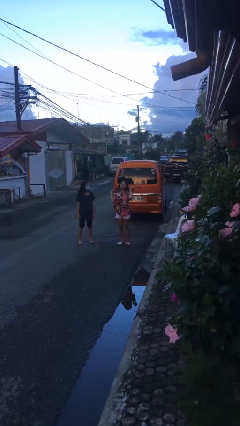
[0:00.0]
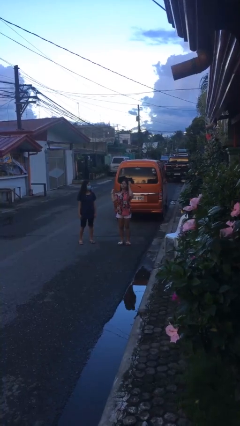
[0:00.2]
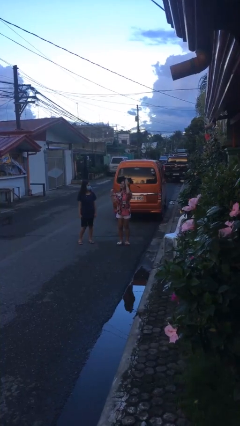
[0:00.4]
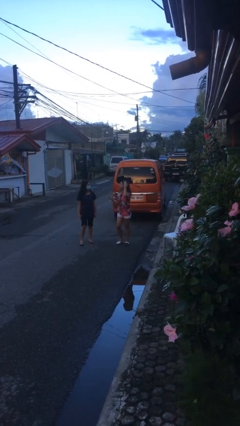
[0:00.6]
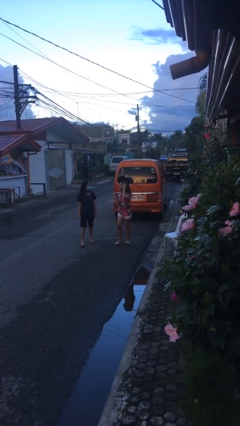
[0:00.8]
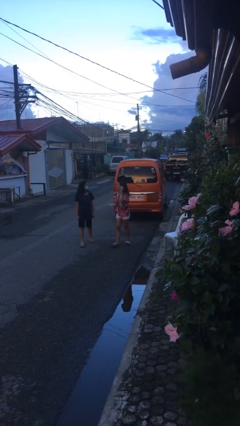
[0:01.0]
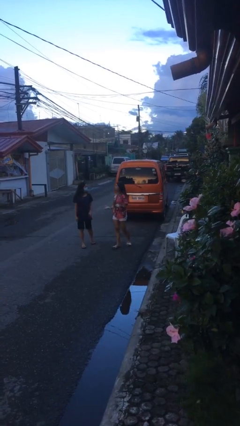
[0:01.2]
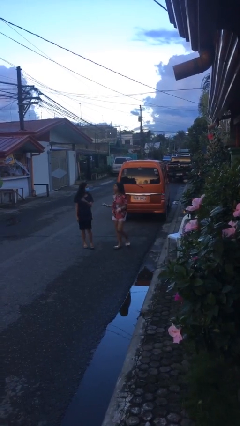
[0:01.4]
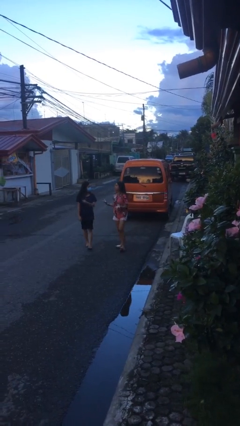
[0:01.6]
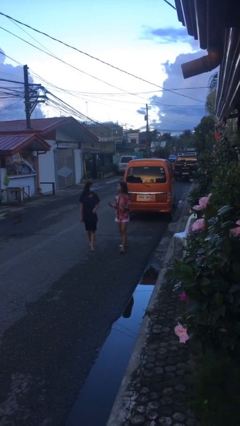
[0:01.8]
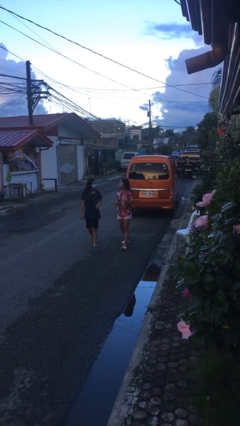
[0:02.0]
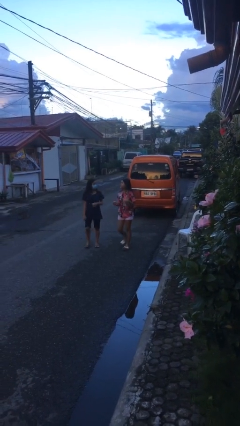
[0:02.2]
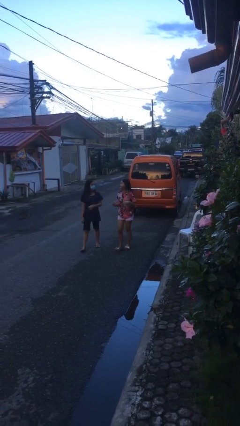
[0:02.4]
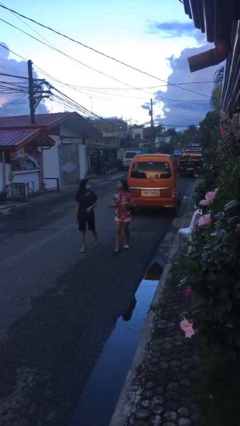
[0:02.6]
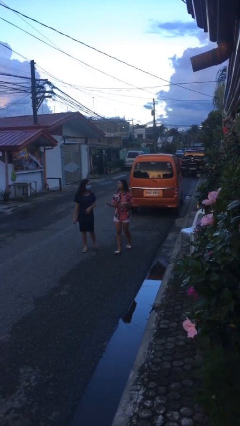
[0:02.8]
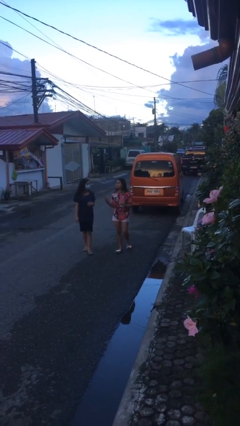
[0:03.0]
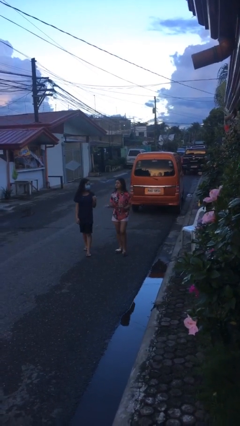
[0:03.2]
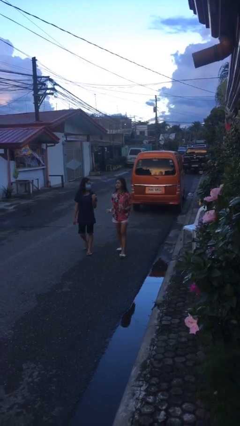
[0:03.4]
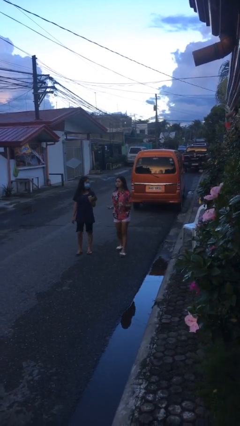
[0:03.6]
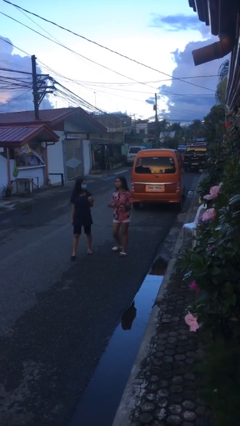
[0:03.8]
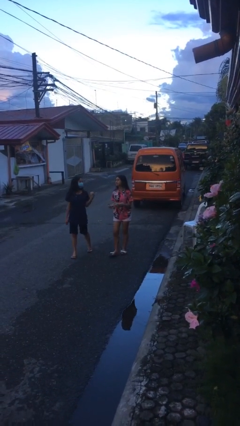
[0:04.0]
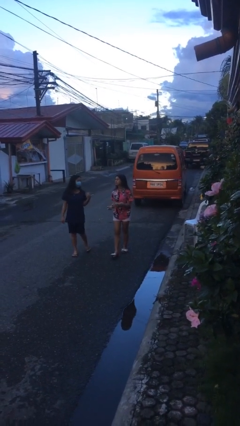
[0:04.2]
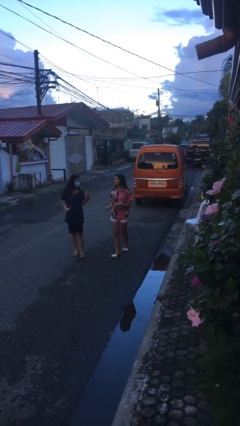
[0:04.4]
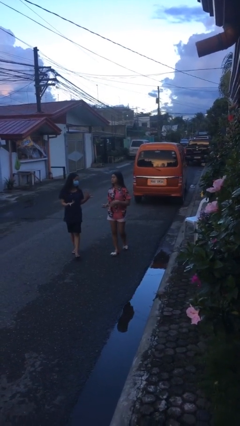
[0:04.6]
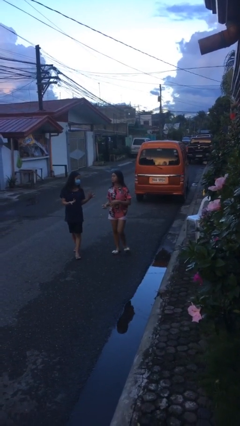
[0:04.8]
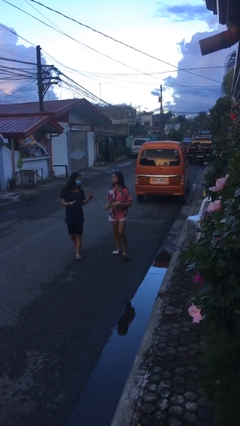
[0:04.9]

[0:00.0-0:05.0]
person talks to person

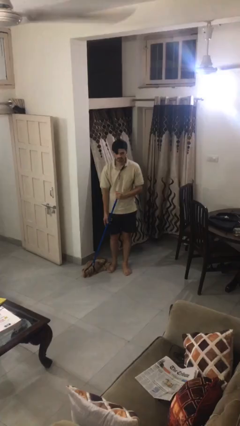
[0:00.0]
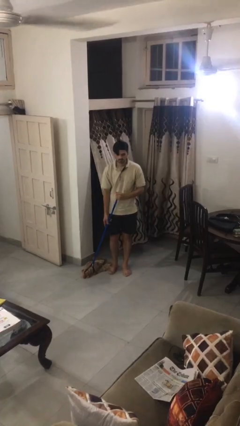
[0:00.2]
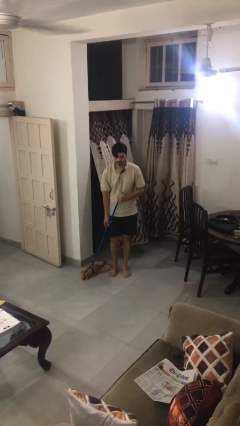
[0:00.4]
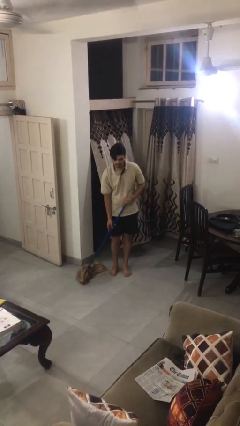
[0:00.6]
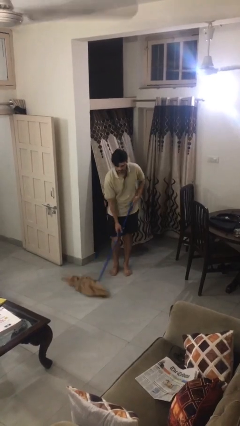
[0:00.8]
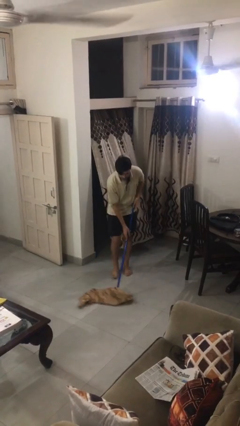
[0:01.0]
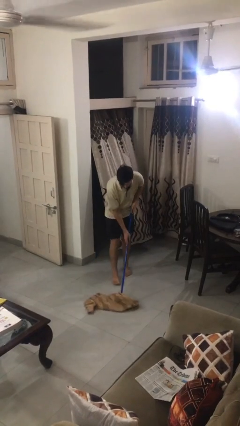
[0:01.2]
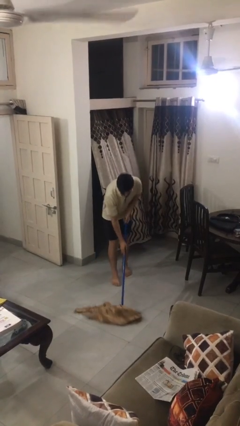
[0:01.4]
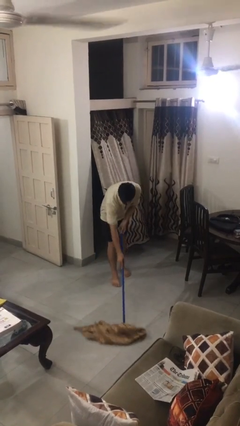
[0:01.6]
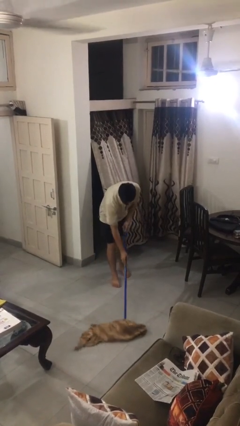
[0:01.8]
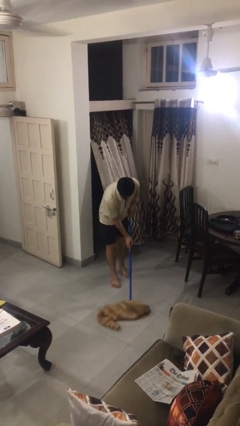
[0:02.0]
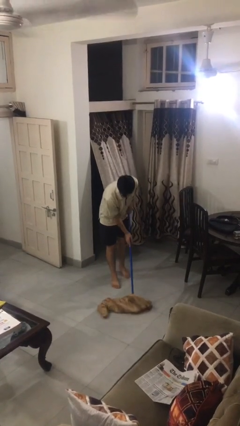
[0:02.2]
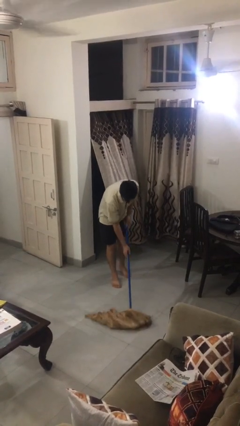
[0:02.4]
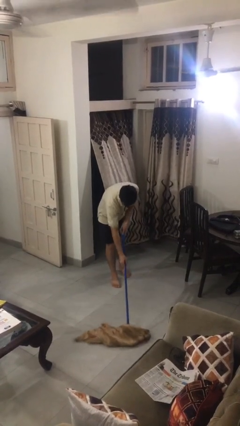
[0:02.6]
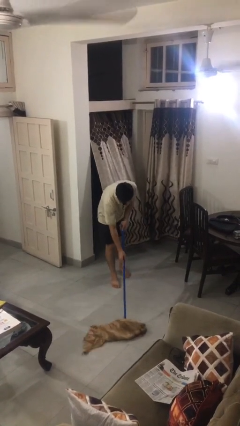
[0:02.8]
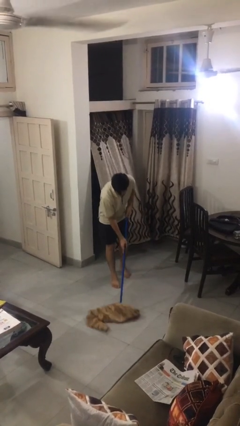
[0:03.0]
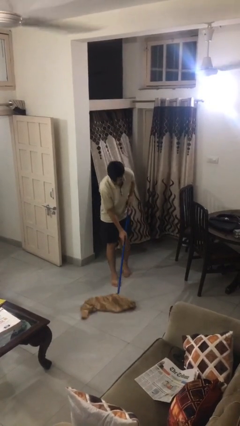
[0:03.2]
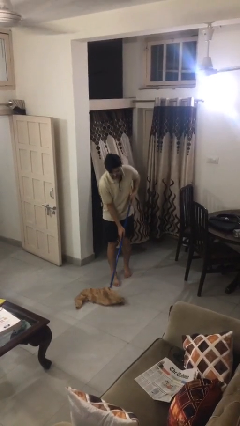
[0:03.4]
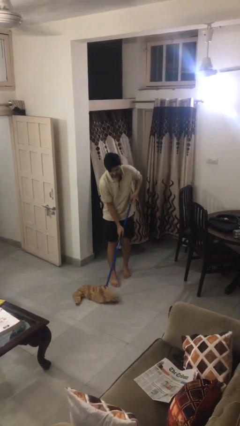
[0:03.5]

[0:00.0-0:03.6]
person mops

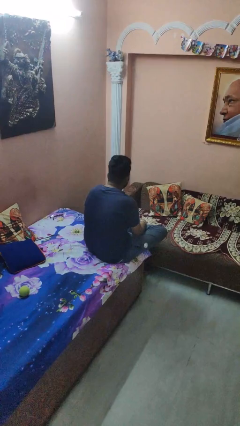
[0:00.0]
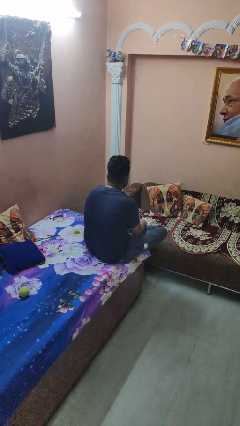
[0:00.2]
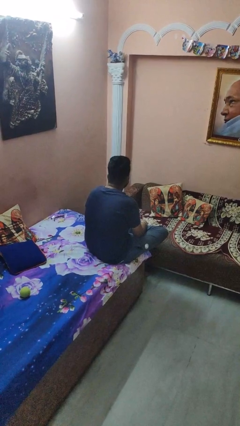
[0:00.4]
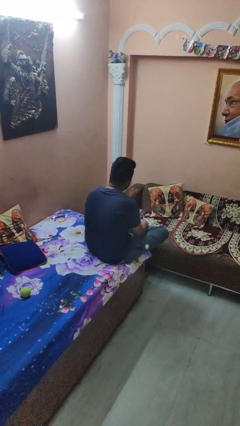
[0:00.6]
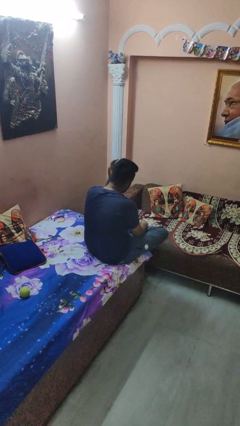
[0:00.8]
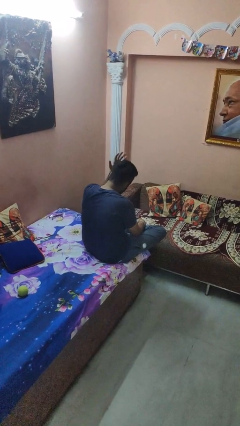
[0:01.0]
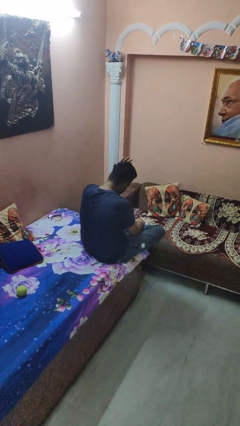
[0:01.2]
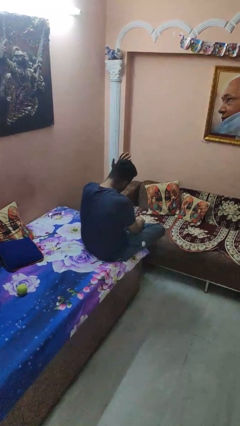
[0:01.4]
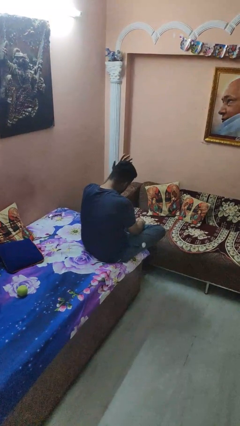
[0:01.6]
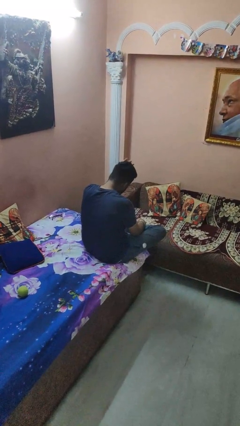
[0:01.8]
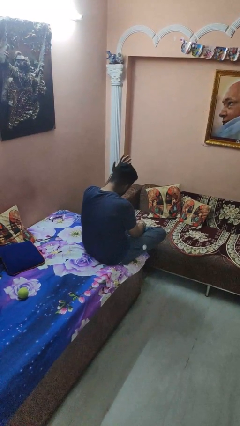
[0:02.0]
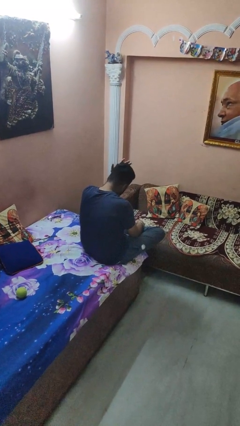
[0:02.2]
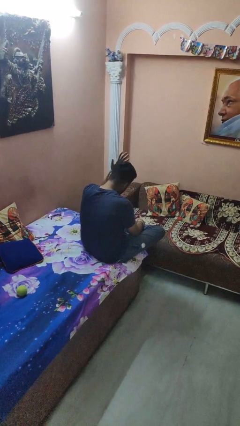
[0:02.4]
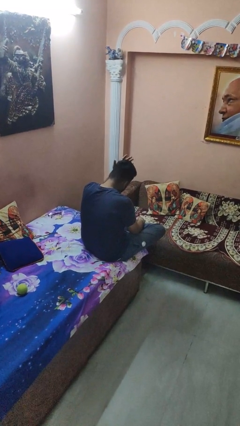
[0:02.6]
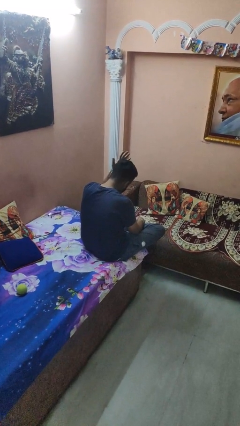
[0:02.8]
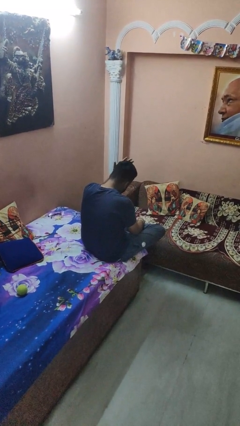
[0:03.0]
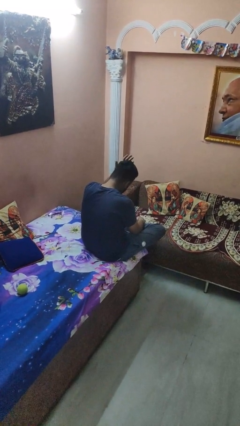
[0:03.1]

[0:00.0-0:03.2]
person pats head

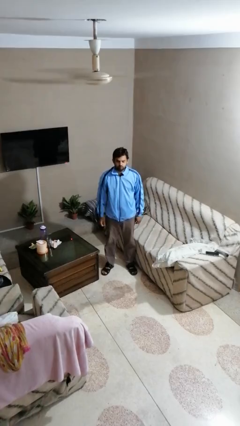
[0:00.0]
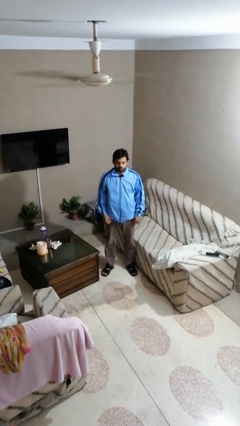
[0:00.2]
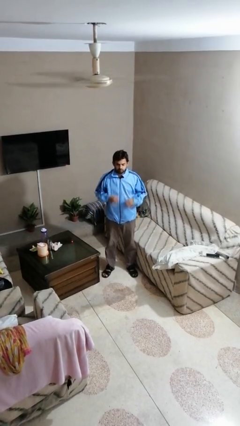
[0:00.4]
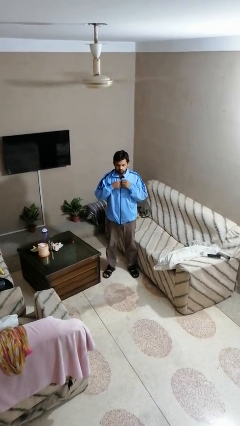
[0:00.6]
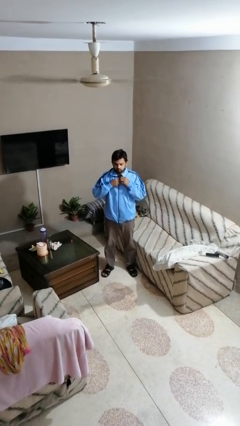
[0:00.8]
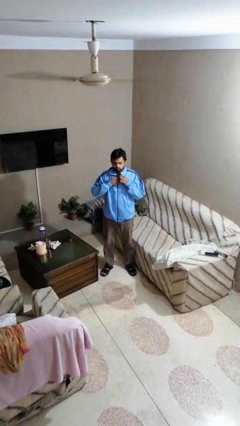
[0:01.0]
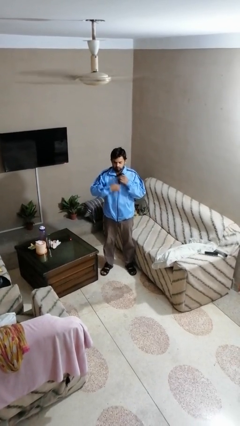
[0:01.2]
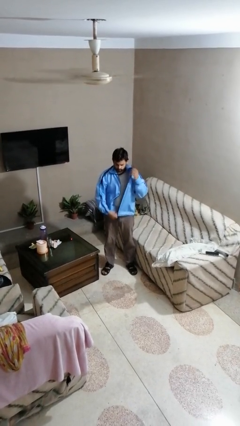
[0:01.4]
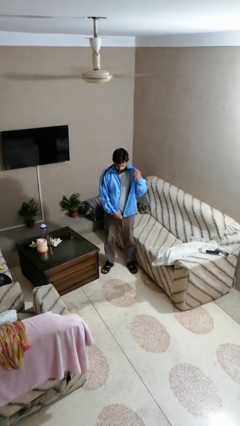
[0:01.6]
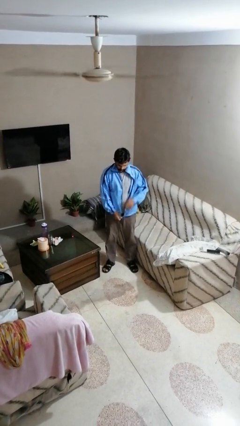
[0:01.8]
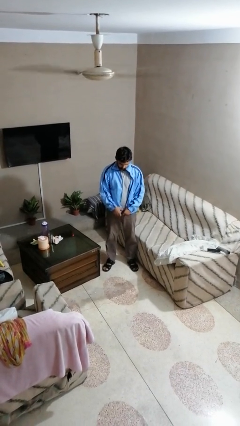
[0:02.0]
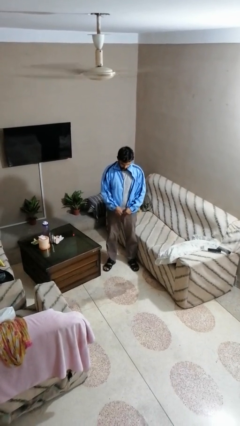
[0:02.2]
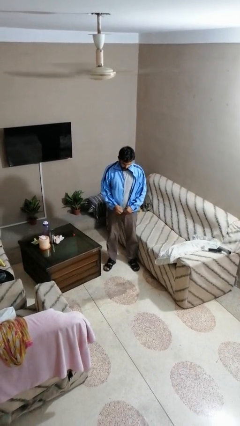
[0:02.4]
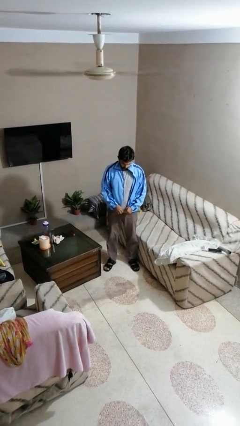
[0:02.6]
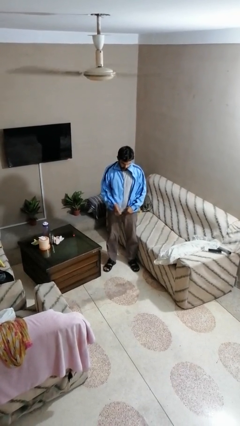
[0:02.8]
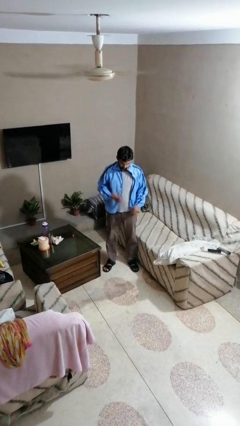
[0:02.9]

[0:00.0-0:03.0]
person unzips jacket

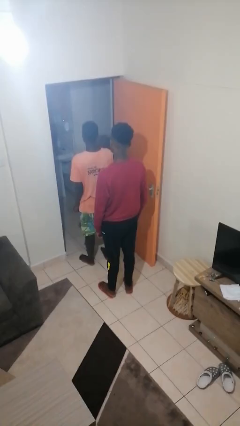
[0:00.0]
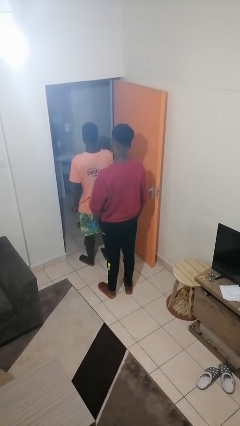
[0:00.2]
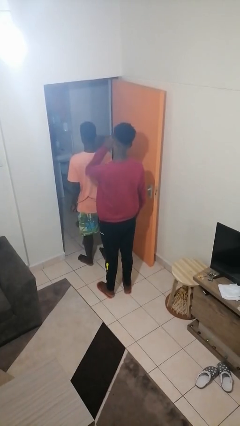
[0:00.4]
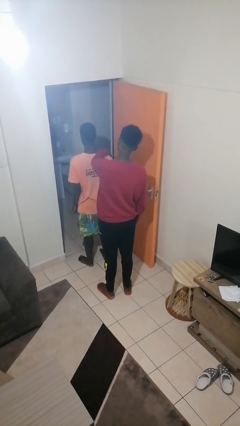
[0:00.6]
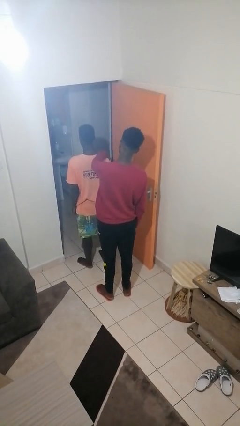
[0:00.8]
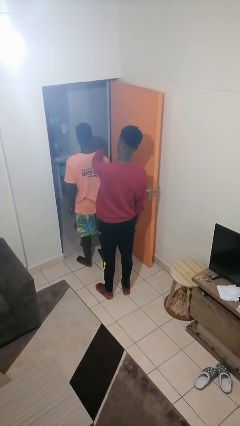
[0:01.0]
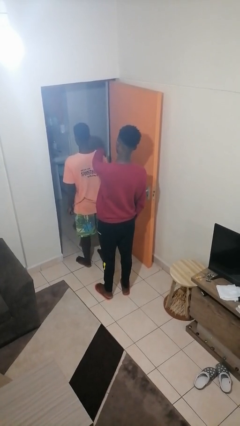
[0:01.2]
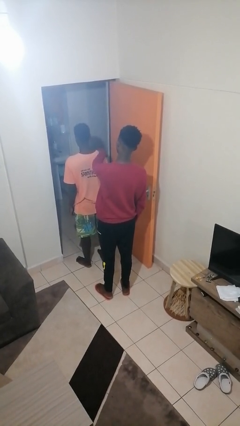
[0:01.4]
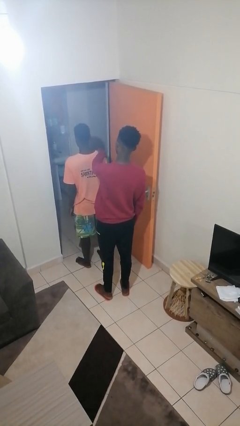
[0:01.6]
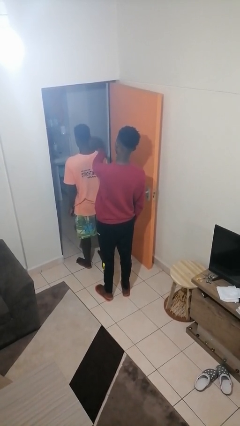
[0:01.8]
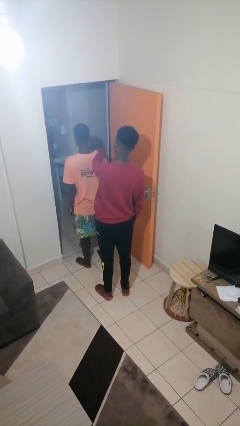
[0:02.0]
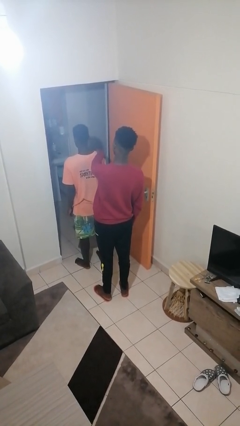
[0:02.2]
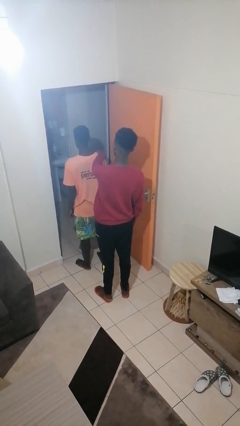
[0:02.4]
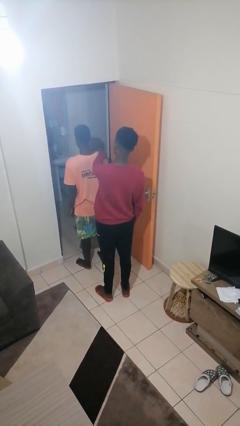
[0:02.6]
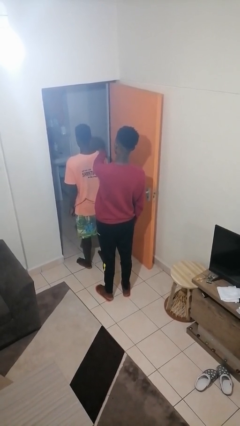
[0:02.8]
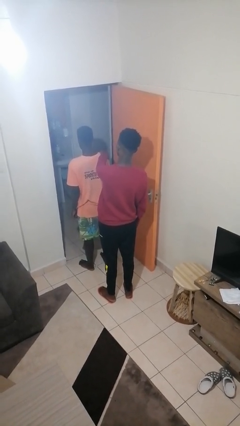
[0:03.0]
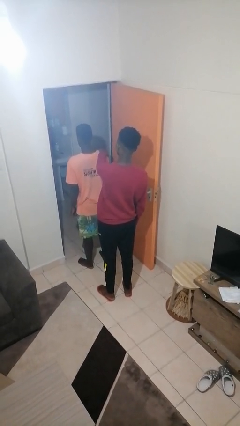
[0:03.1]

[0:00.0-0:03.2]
person grabs person by shoulder
